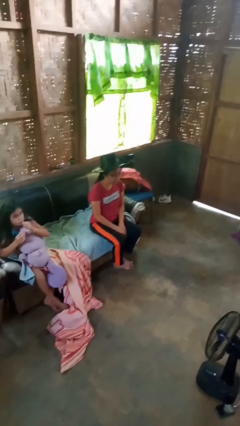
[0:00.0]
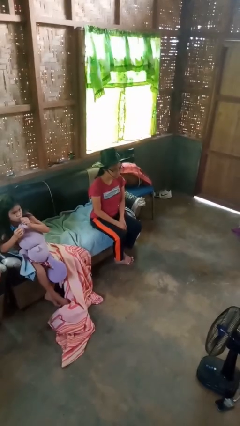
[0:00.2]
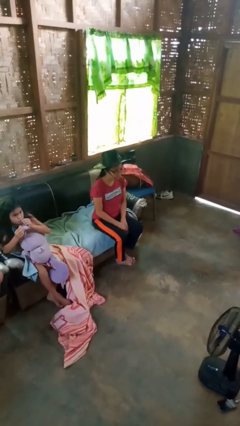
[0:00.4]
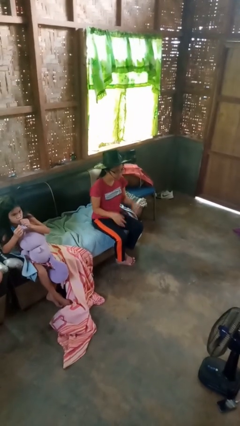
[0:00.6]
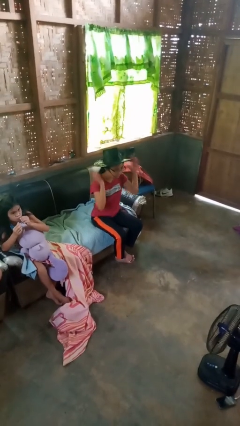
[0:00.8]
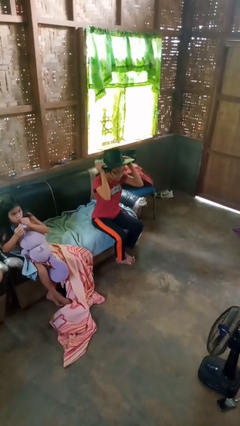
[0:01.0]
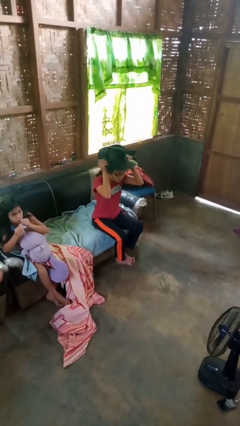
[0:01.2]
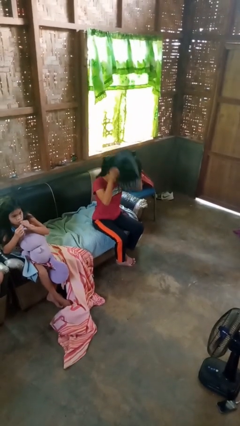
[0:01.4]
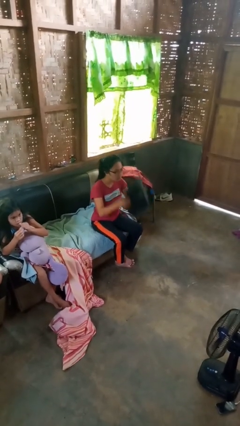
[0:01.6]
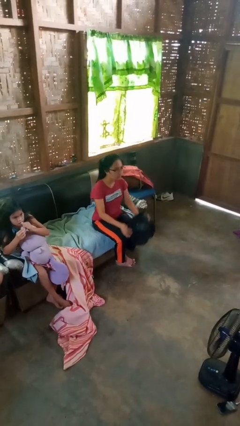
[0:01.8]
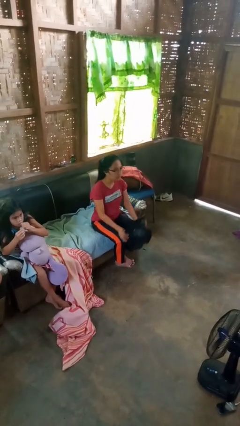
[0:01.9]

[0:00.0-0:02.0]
person takes off hat

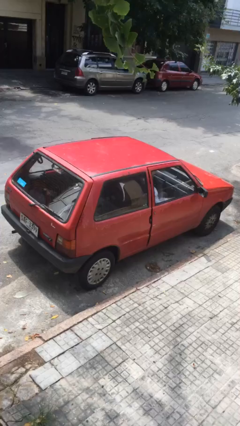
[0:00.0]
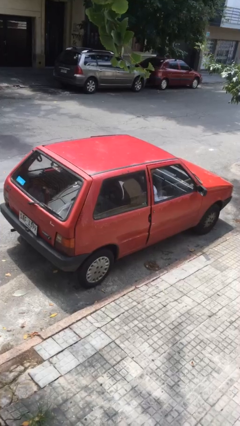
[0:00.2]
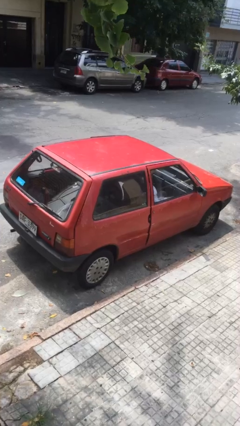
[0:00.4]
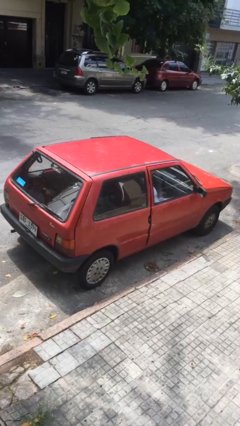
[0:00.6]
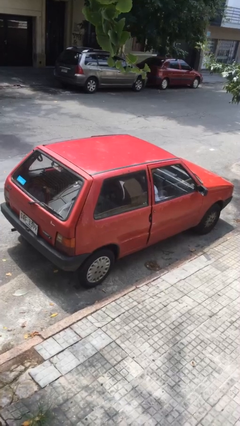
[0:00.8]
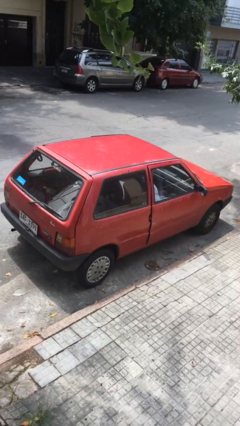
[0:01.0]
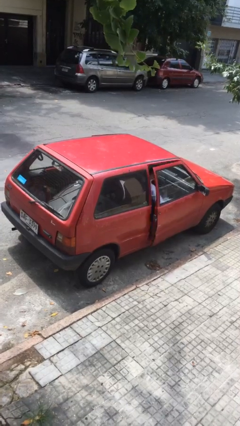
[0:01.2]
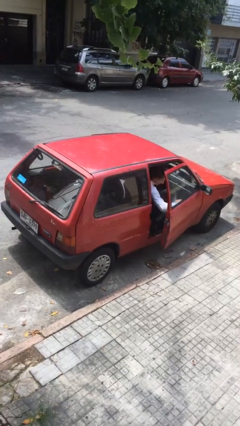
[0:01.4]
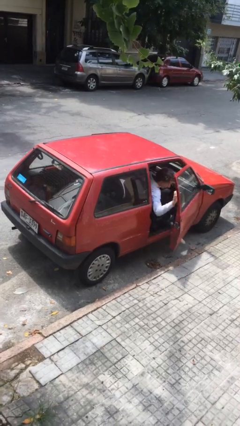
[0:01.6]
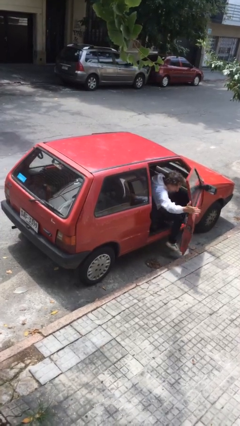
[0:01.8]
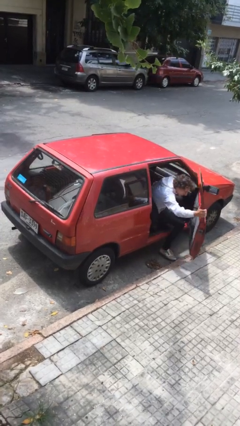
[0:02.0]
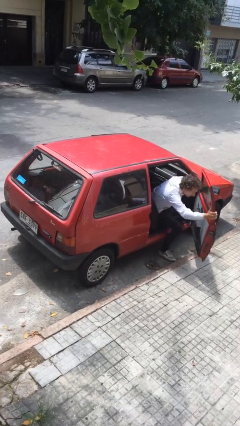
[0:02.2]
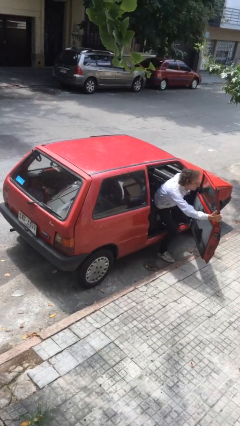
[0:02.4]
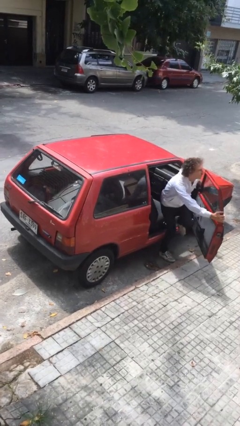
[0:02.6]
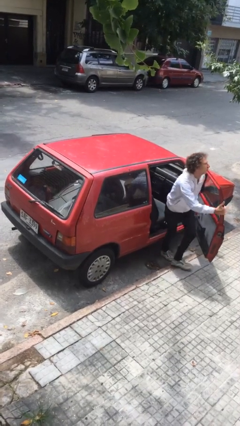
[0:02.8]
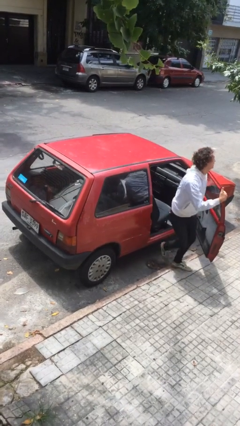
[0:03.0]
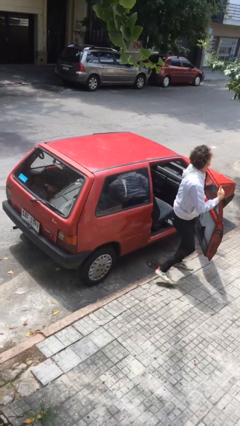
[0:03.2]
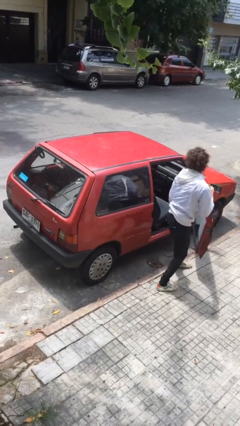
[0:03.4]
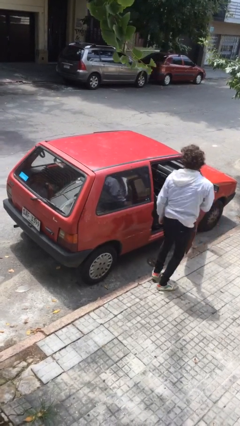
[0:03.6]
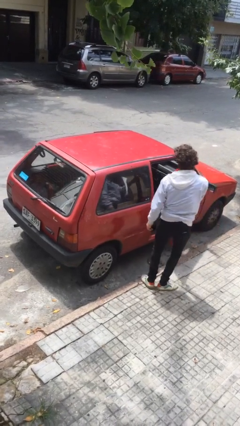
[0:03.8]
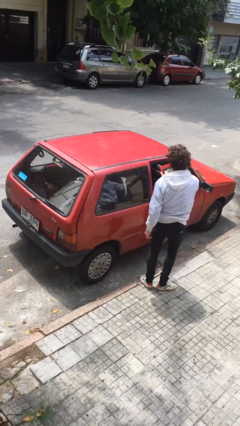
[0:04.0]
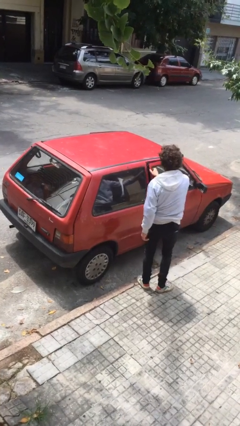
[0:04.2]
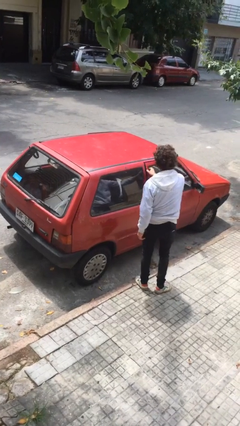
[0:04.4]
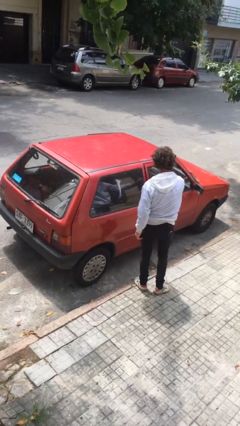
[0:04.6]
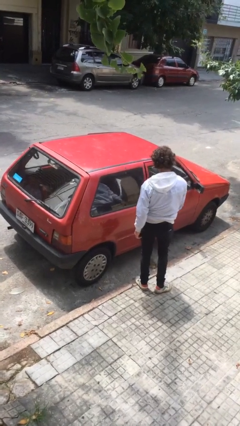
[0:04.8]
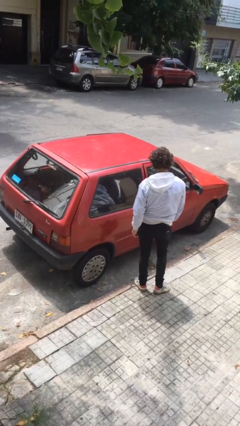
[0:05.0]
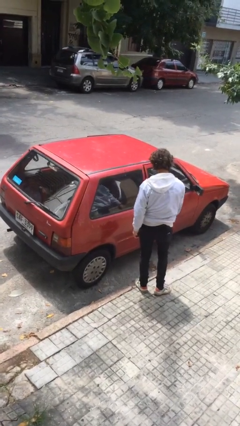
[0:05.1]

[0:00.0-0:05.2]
car drops off person

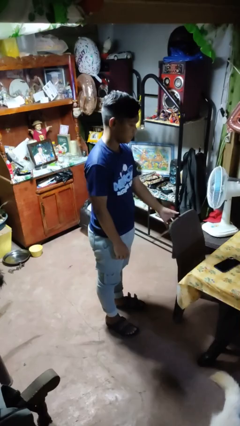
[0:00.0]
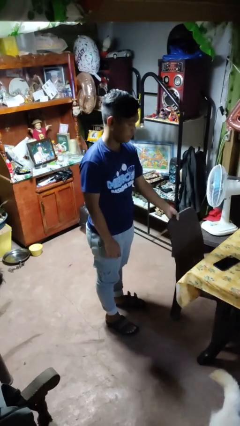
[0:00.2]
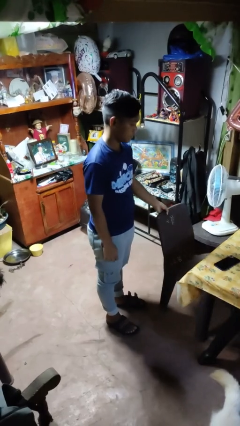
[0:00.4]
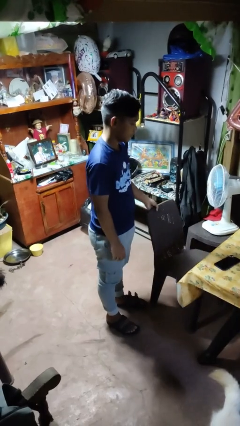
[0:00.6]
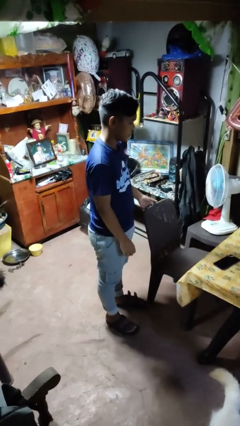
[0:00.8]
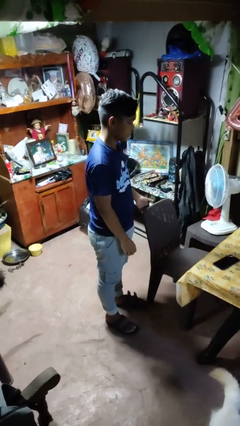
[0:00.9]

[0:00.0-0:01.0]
person pulls out chair

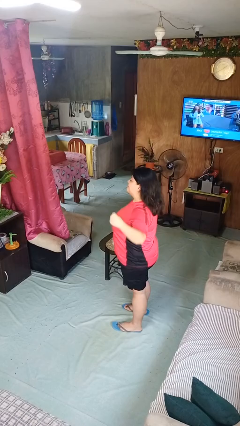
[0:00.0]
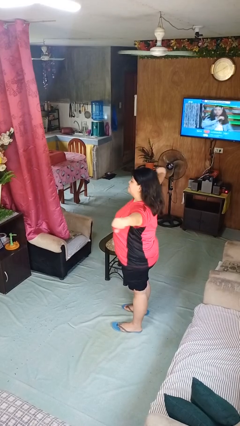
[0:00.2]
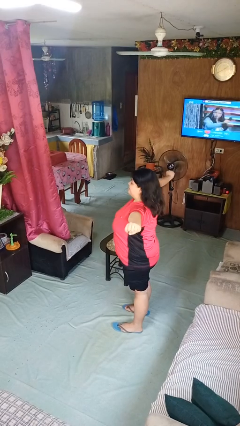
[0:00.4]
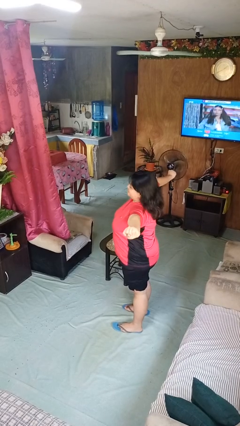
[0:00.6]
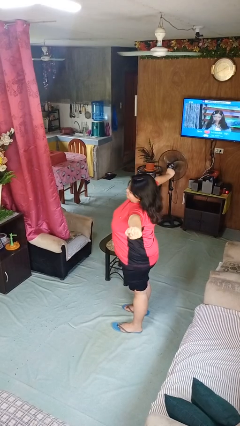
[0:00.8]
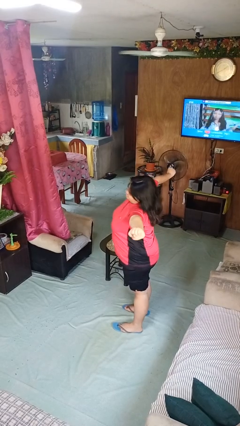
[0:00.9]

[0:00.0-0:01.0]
person stretches arms to side

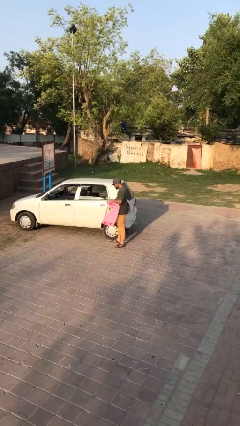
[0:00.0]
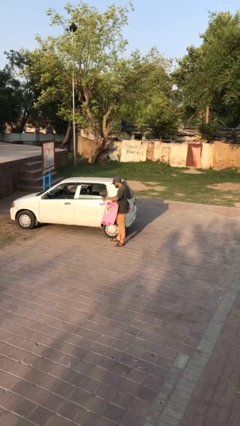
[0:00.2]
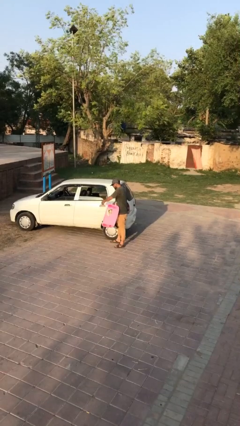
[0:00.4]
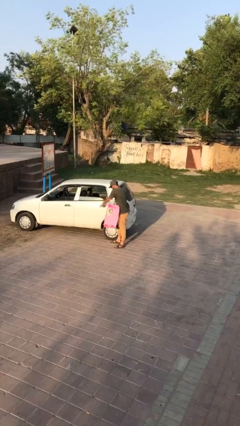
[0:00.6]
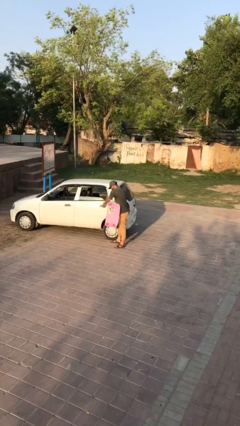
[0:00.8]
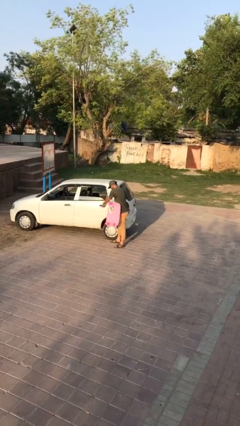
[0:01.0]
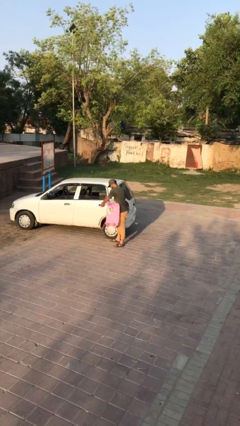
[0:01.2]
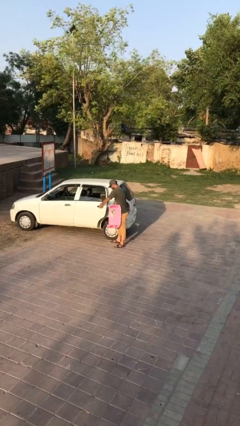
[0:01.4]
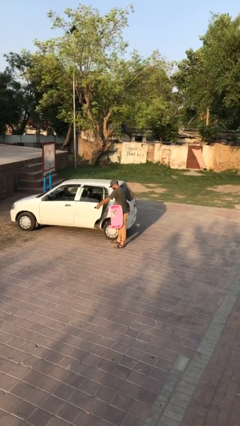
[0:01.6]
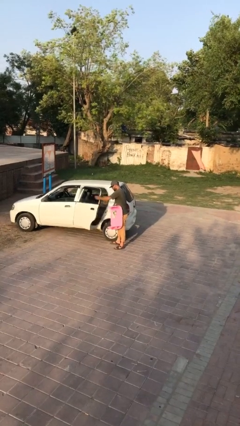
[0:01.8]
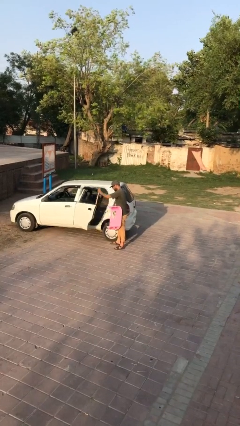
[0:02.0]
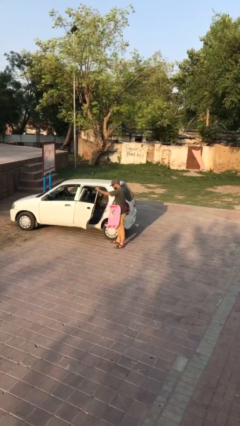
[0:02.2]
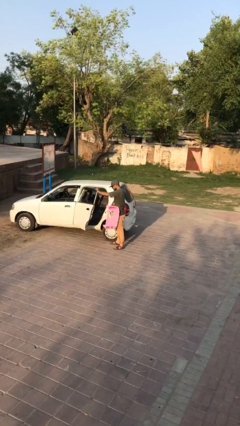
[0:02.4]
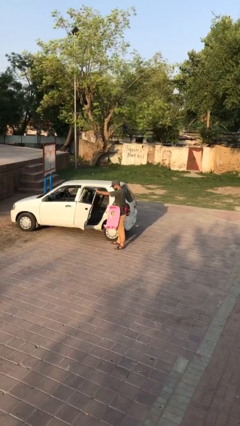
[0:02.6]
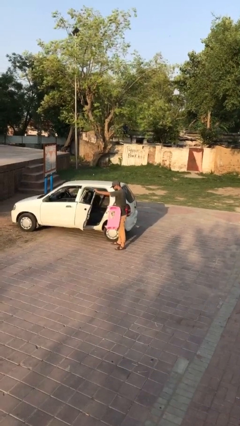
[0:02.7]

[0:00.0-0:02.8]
person opens car door

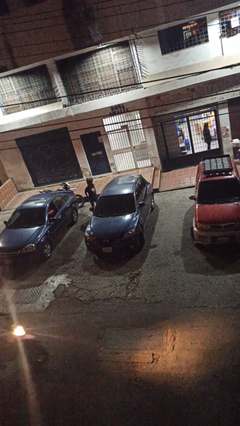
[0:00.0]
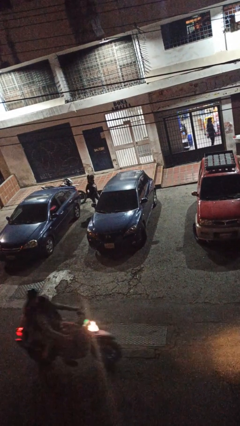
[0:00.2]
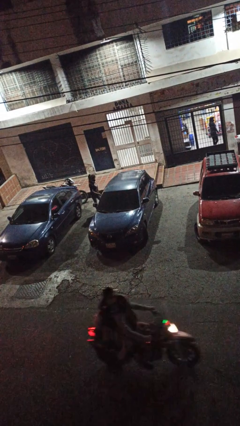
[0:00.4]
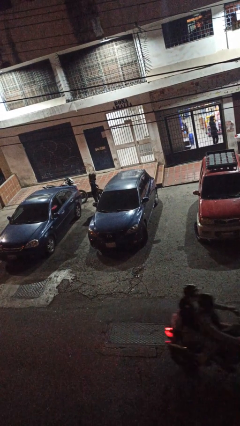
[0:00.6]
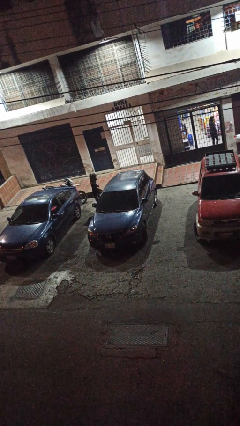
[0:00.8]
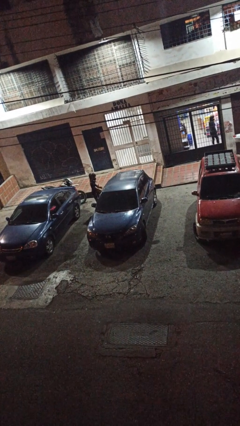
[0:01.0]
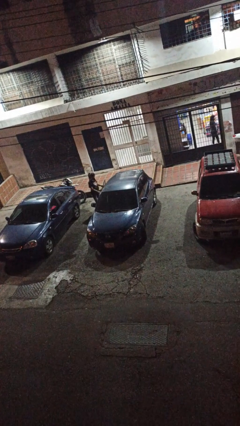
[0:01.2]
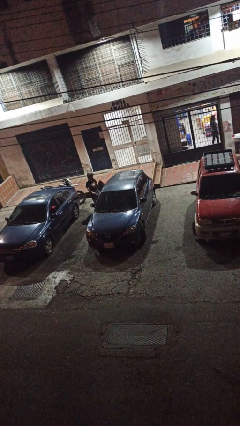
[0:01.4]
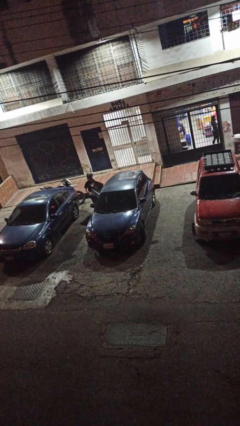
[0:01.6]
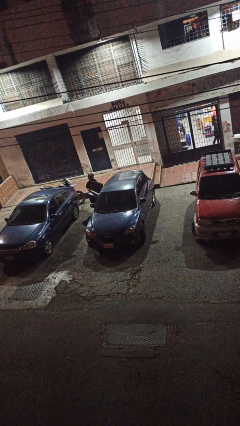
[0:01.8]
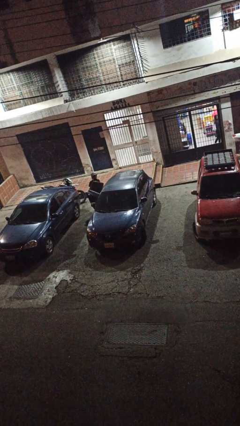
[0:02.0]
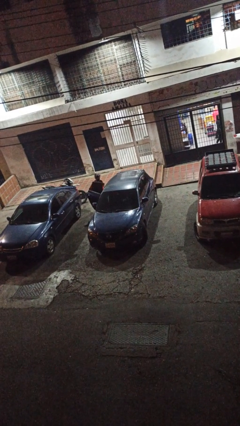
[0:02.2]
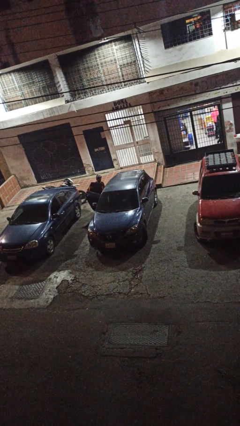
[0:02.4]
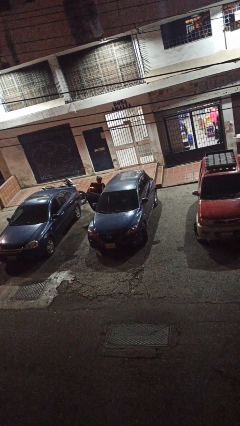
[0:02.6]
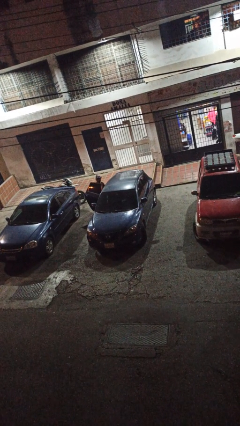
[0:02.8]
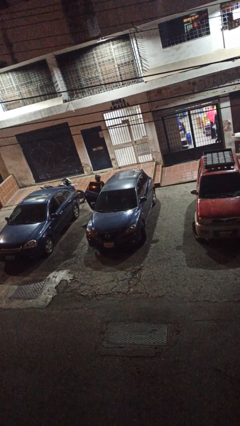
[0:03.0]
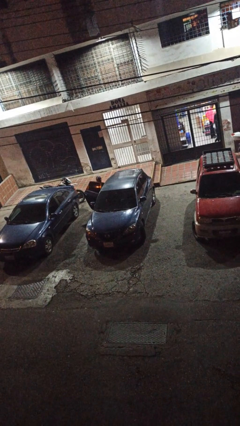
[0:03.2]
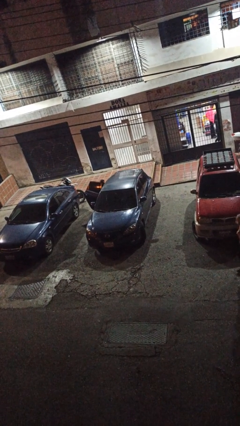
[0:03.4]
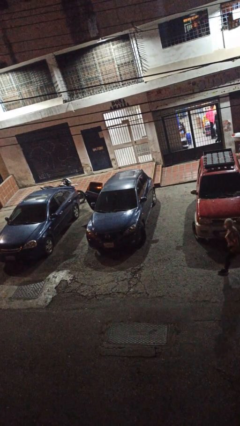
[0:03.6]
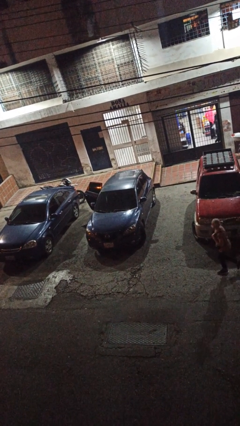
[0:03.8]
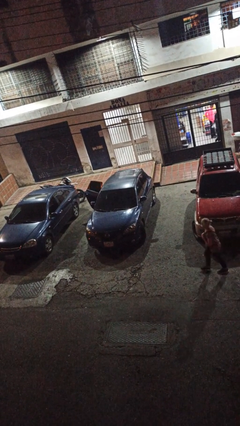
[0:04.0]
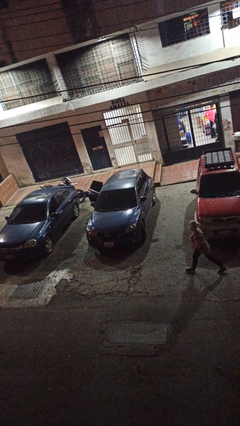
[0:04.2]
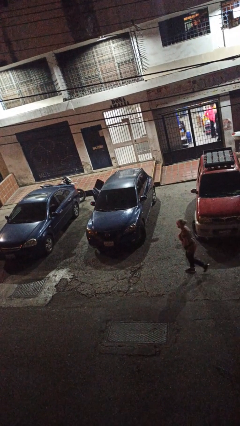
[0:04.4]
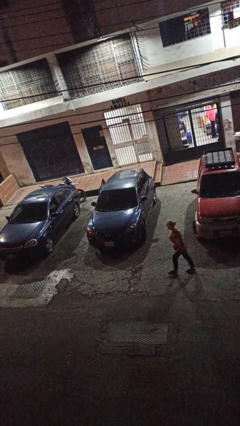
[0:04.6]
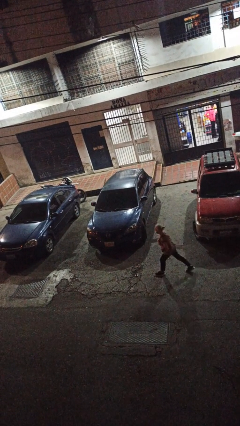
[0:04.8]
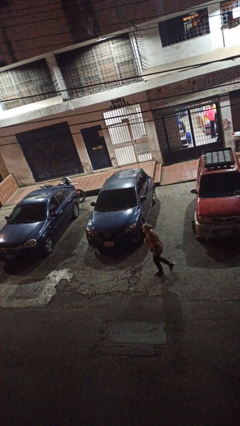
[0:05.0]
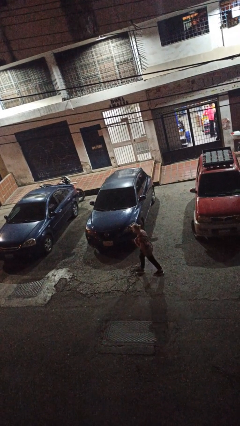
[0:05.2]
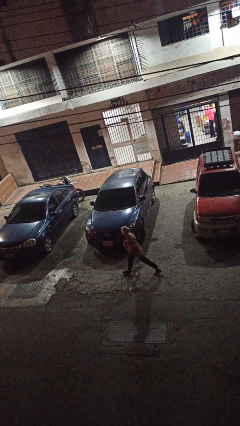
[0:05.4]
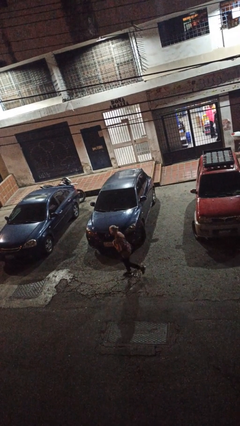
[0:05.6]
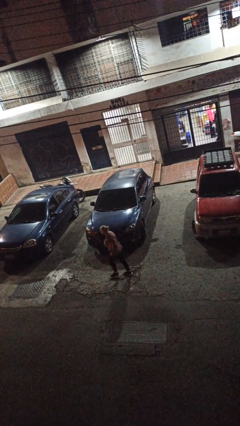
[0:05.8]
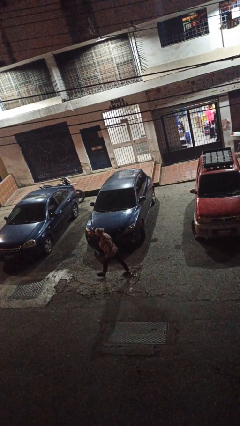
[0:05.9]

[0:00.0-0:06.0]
car picks up person
